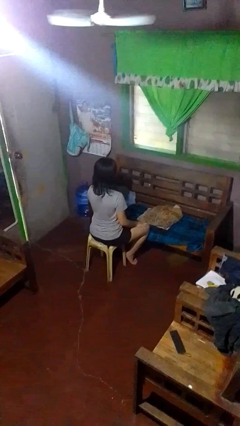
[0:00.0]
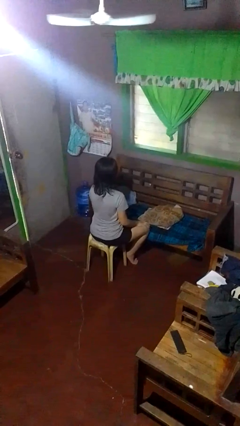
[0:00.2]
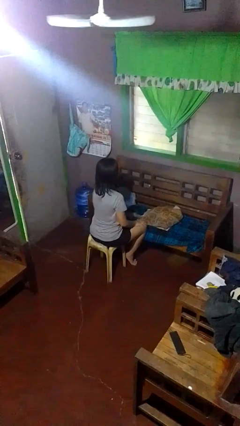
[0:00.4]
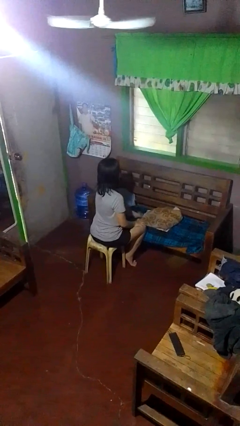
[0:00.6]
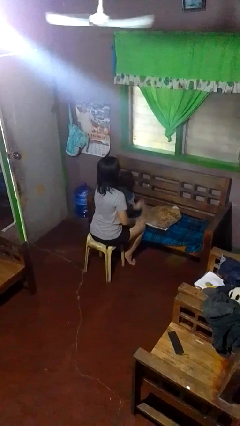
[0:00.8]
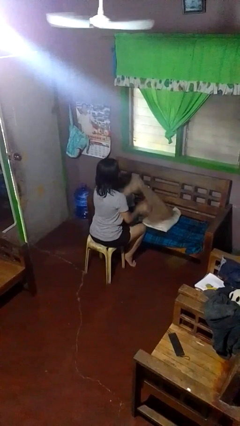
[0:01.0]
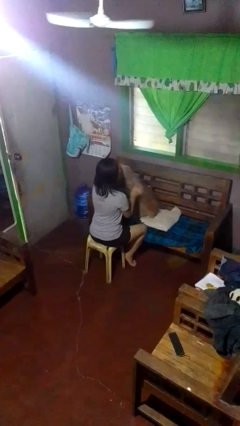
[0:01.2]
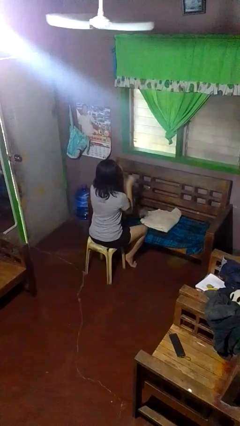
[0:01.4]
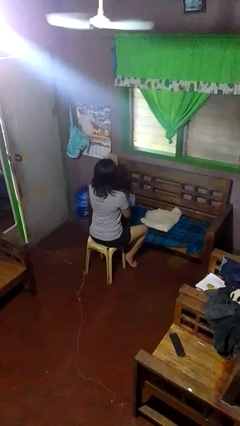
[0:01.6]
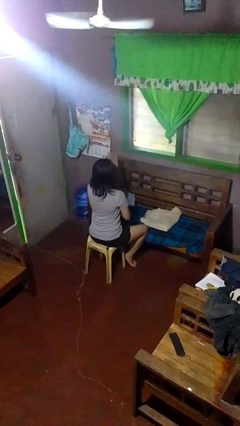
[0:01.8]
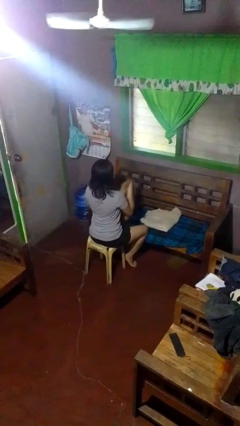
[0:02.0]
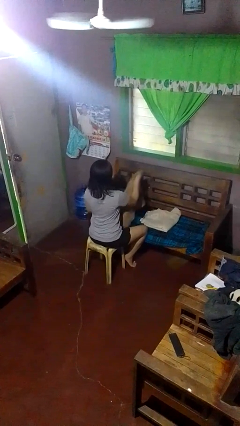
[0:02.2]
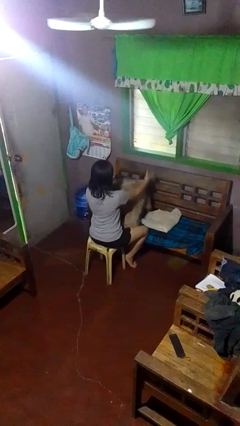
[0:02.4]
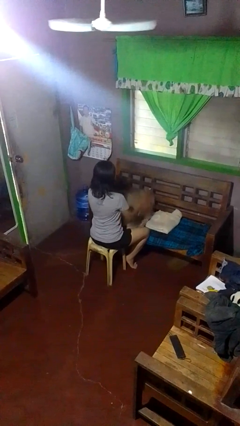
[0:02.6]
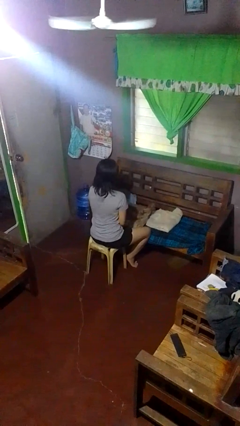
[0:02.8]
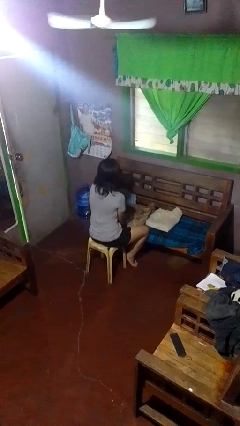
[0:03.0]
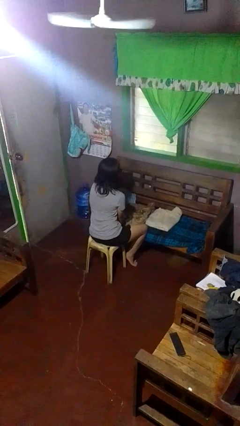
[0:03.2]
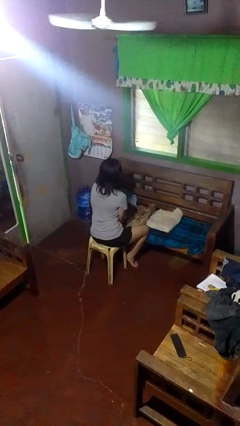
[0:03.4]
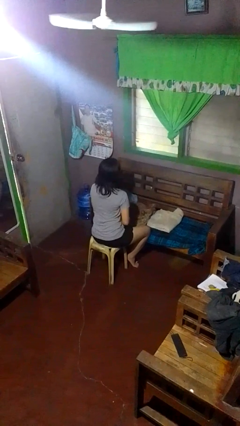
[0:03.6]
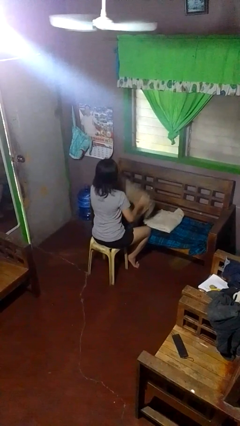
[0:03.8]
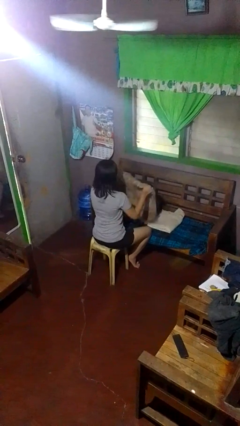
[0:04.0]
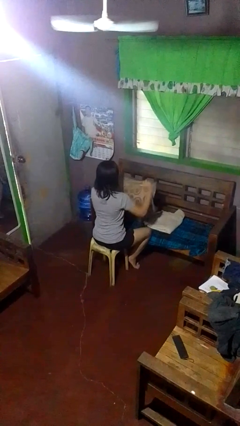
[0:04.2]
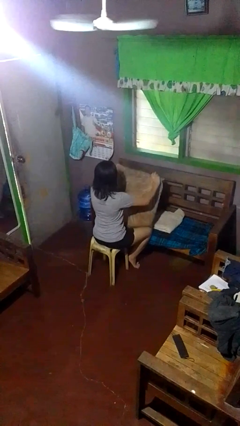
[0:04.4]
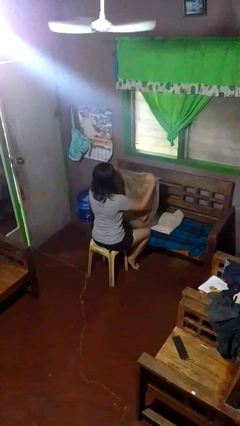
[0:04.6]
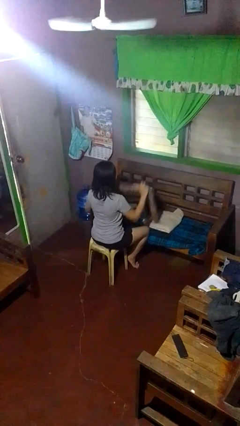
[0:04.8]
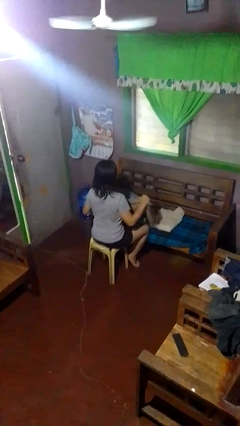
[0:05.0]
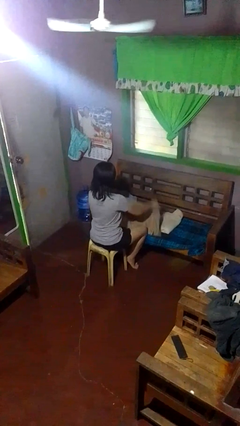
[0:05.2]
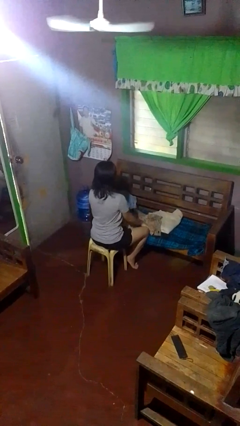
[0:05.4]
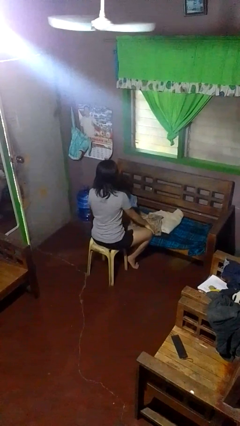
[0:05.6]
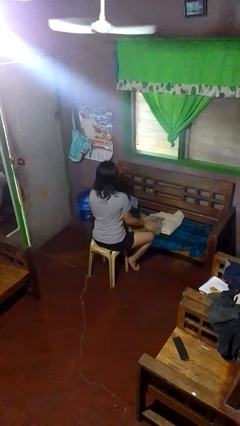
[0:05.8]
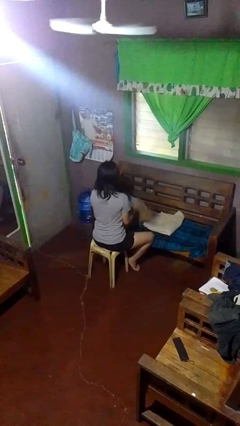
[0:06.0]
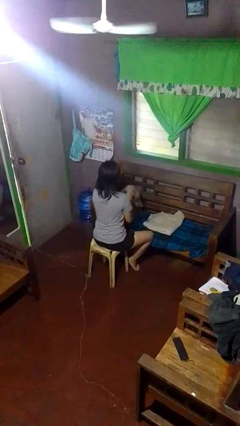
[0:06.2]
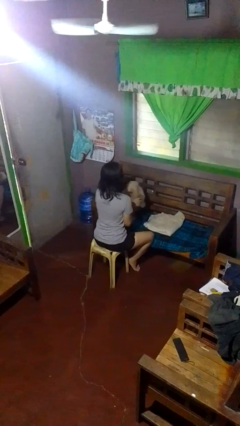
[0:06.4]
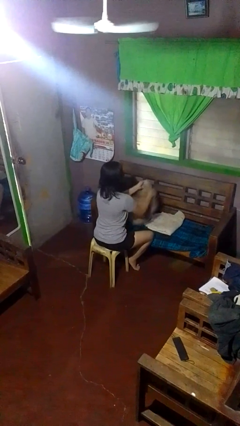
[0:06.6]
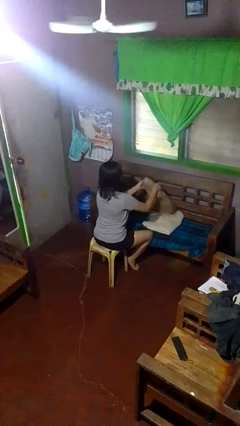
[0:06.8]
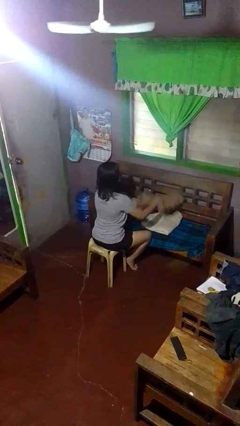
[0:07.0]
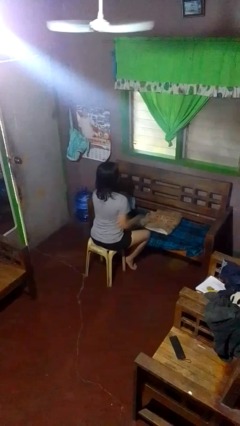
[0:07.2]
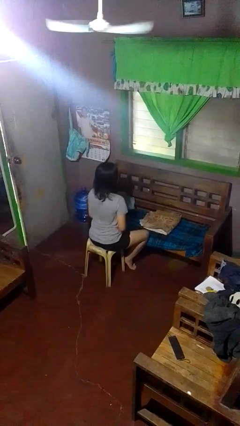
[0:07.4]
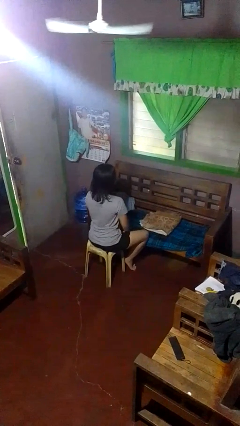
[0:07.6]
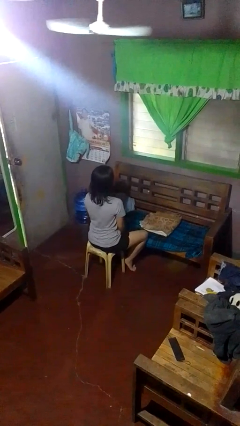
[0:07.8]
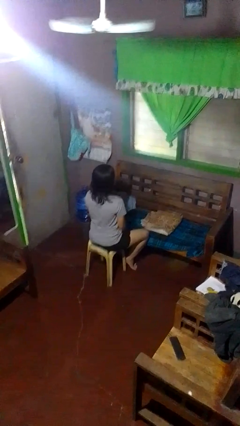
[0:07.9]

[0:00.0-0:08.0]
person folds towel

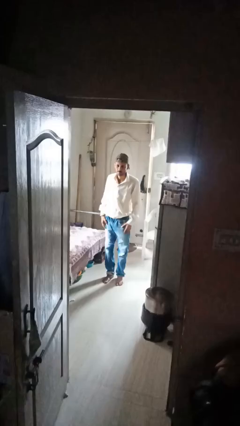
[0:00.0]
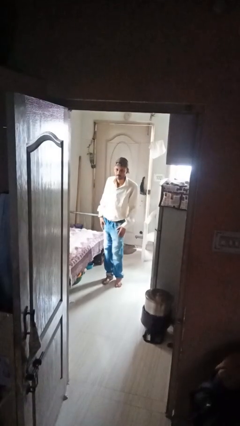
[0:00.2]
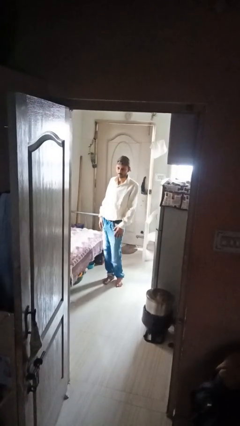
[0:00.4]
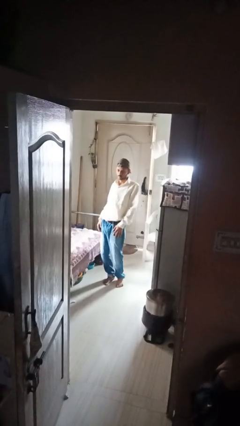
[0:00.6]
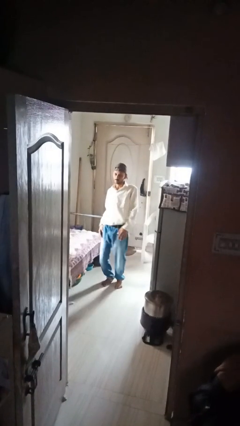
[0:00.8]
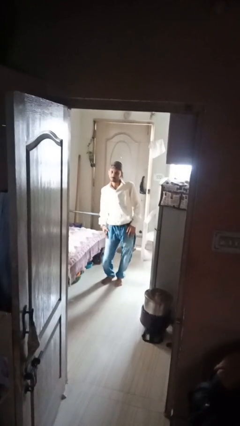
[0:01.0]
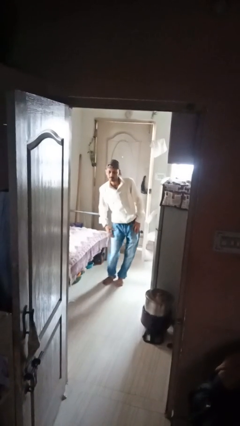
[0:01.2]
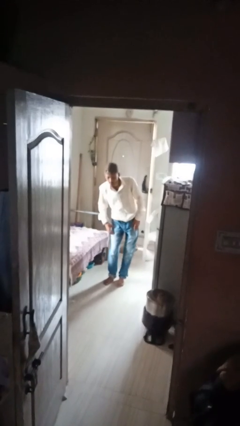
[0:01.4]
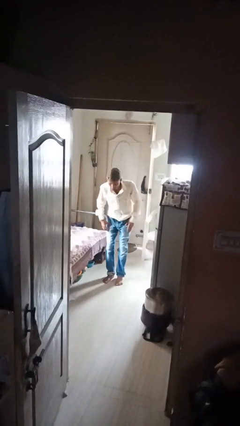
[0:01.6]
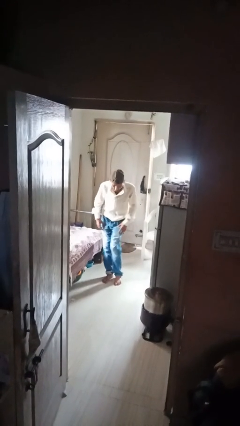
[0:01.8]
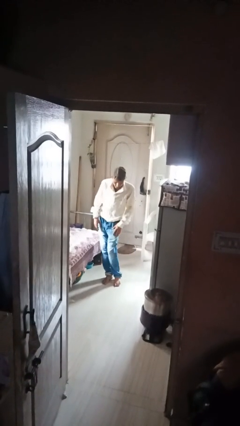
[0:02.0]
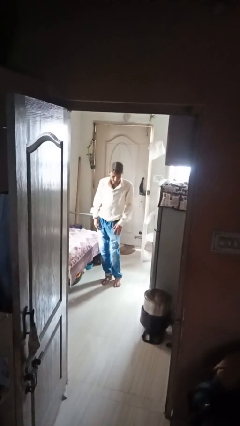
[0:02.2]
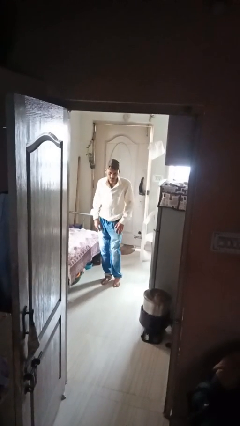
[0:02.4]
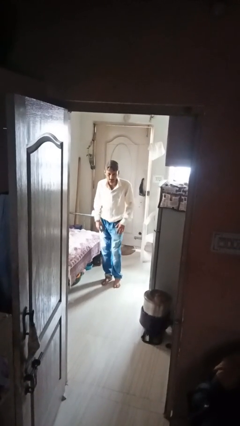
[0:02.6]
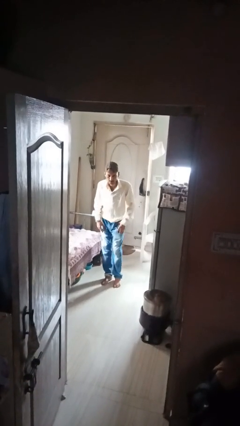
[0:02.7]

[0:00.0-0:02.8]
person wiggles hips

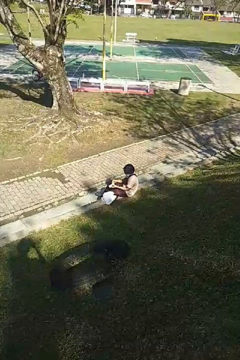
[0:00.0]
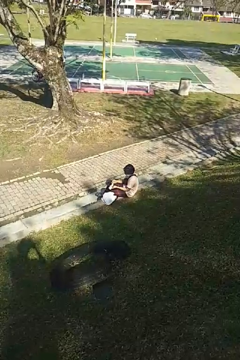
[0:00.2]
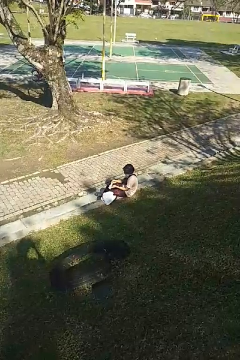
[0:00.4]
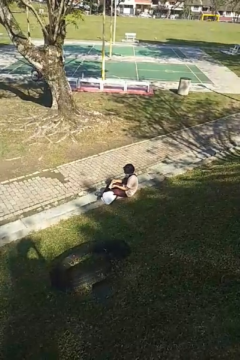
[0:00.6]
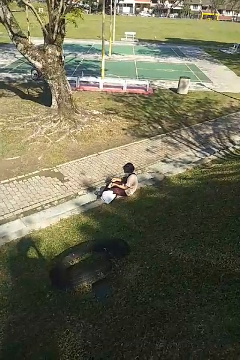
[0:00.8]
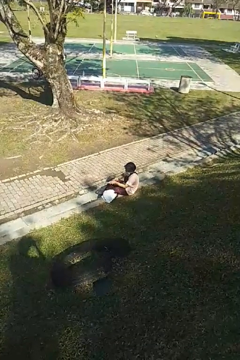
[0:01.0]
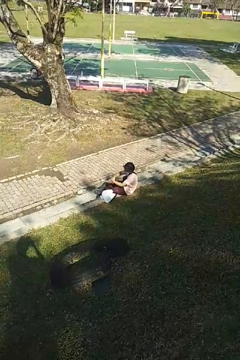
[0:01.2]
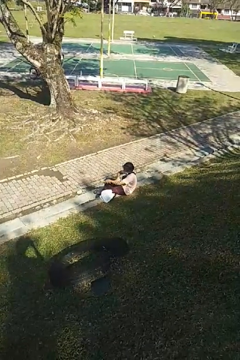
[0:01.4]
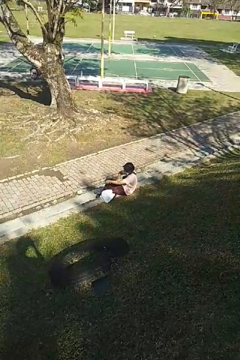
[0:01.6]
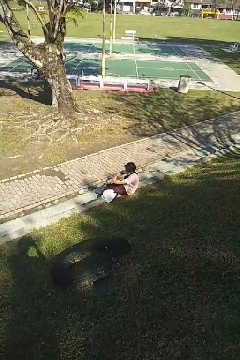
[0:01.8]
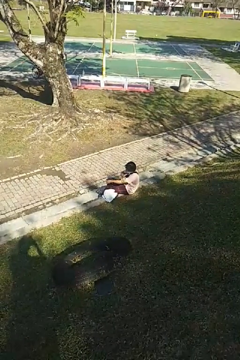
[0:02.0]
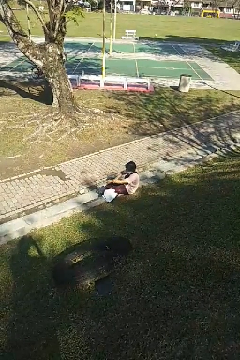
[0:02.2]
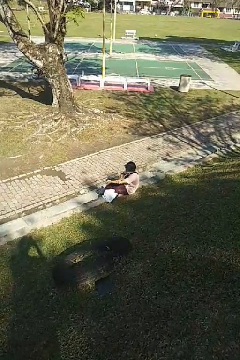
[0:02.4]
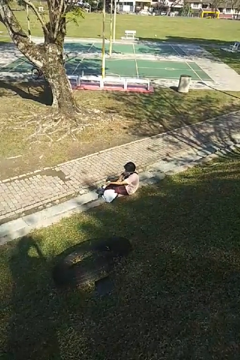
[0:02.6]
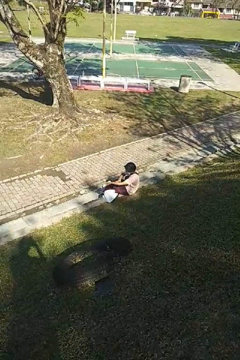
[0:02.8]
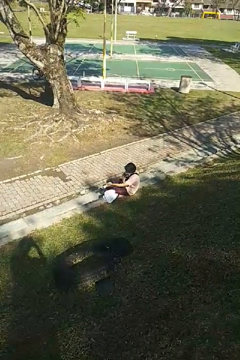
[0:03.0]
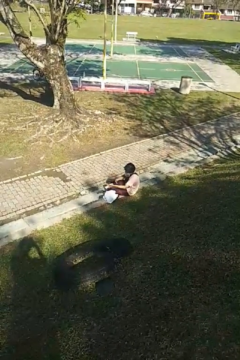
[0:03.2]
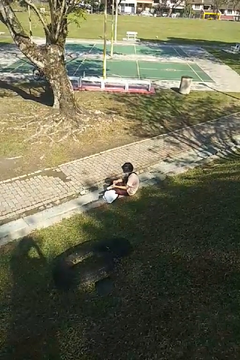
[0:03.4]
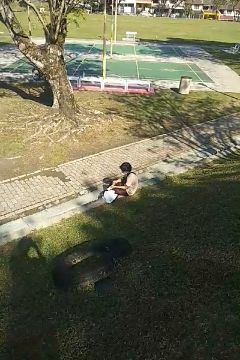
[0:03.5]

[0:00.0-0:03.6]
person applies sunscreen

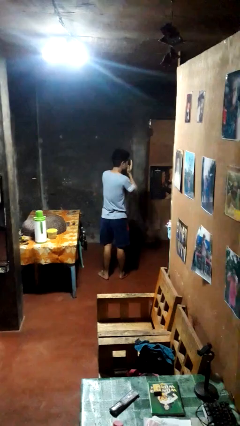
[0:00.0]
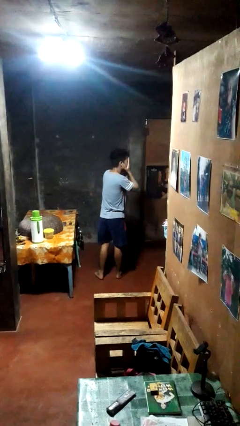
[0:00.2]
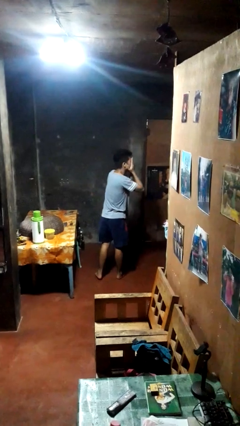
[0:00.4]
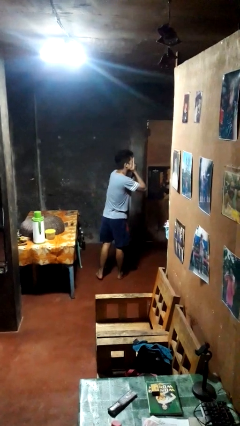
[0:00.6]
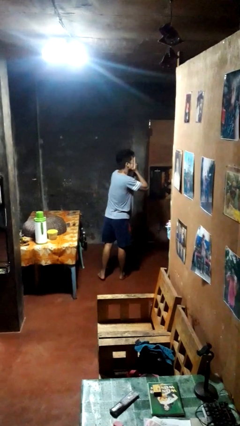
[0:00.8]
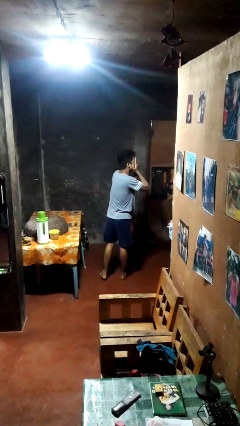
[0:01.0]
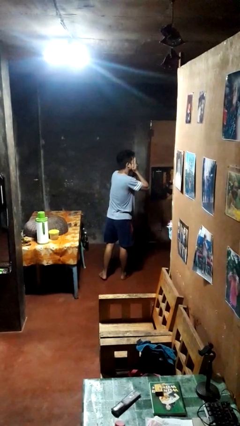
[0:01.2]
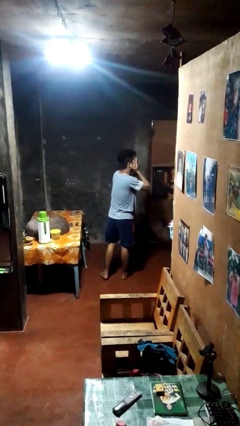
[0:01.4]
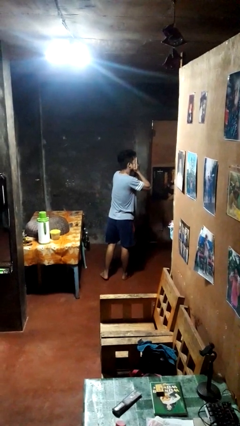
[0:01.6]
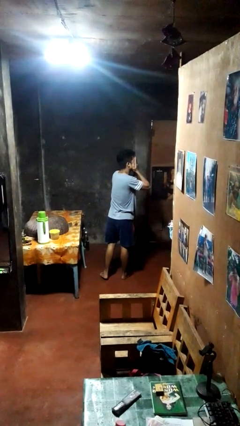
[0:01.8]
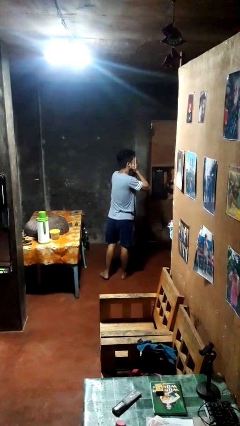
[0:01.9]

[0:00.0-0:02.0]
person covers face with hands

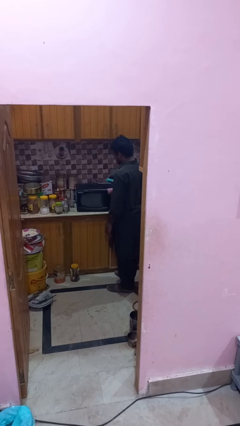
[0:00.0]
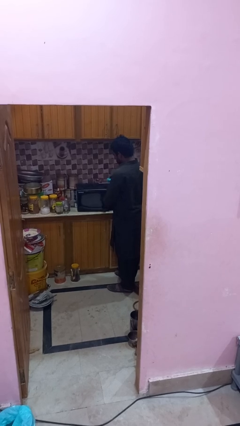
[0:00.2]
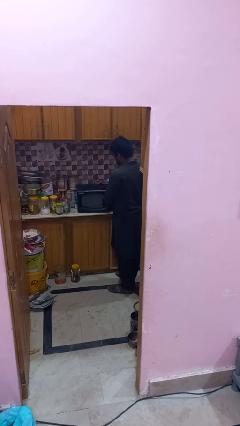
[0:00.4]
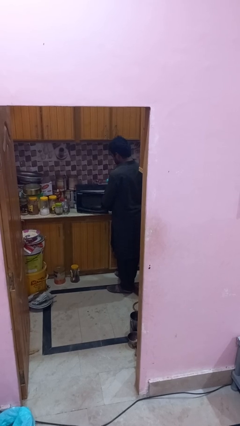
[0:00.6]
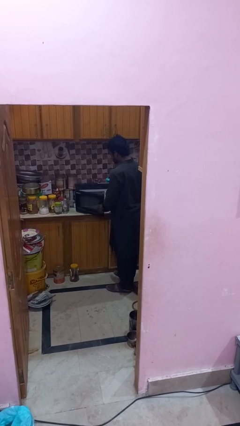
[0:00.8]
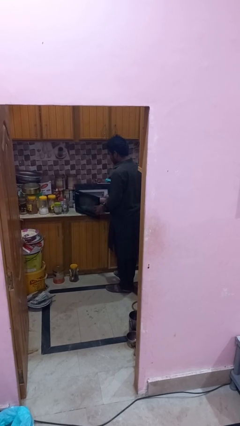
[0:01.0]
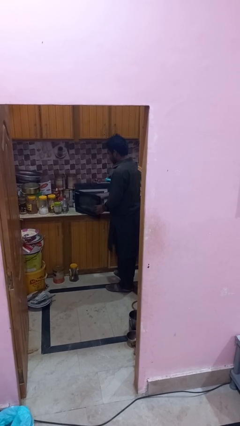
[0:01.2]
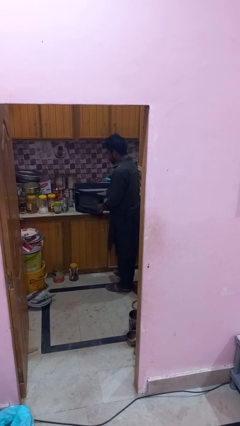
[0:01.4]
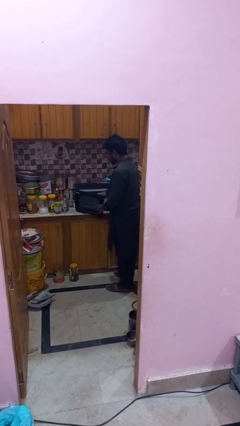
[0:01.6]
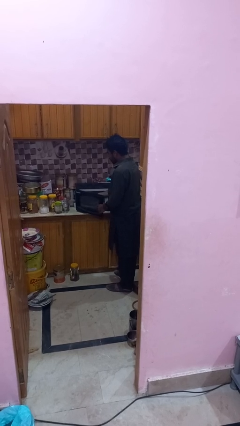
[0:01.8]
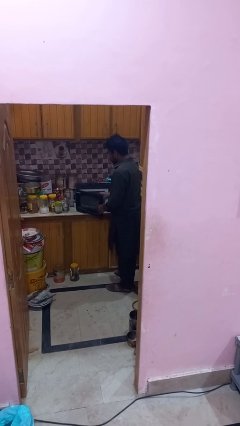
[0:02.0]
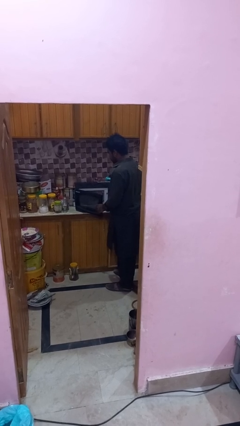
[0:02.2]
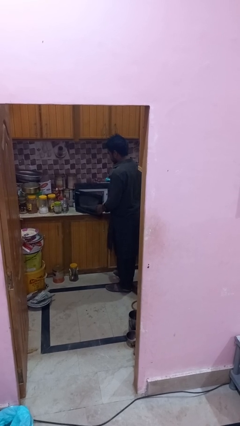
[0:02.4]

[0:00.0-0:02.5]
person puts object into microwave
